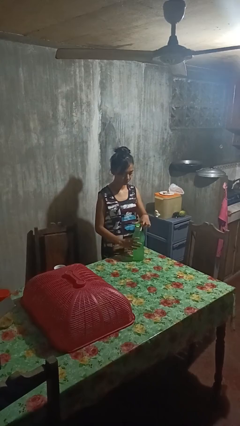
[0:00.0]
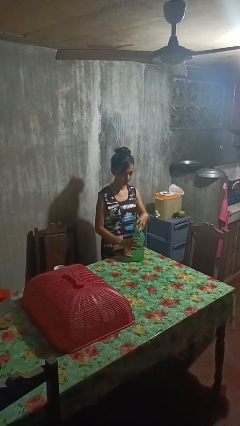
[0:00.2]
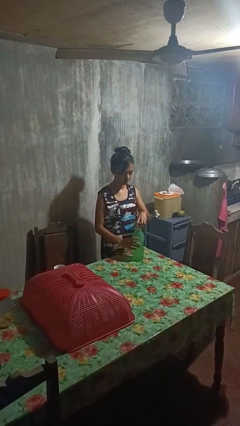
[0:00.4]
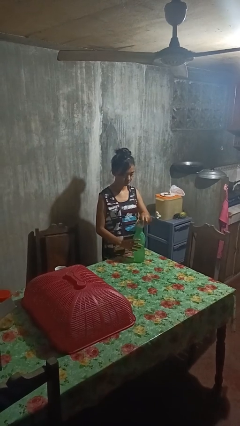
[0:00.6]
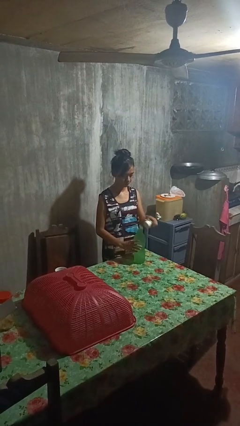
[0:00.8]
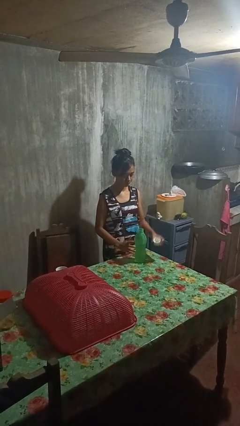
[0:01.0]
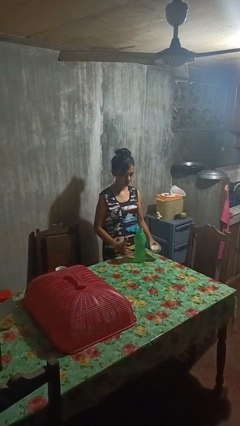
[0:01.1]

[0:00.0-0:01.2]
person unscrews lid from bottle

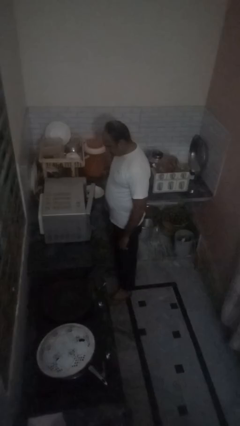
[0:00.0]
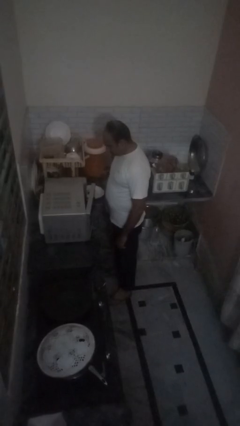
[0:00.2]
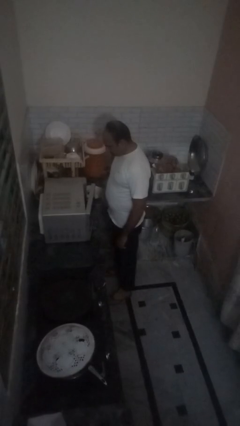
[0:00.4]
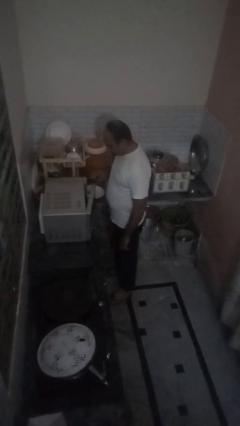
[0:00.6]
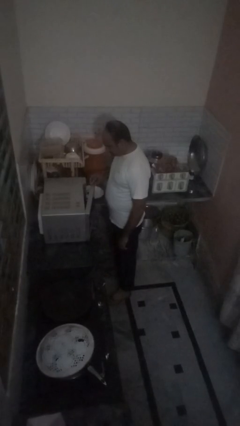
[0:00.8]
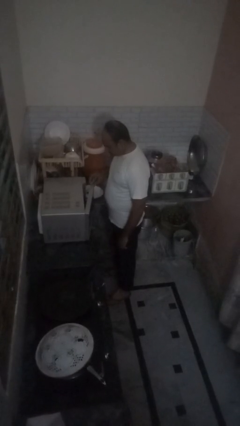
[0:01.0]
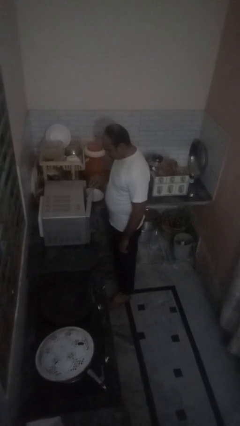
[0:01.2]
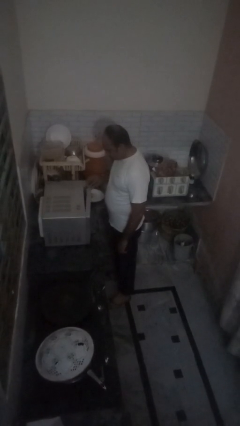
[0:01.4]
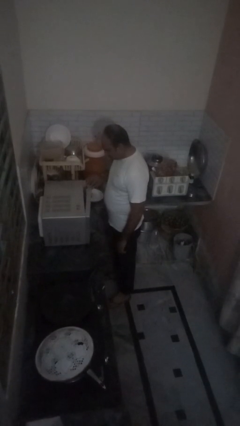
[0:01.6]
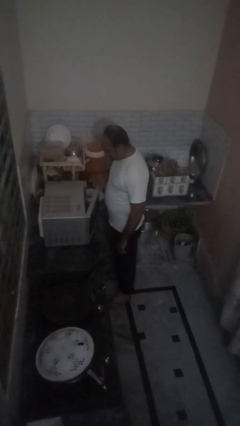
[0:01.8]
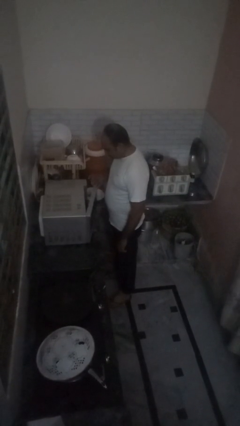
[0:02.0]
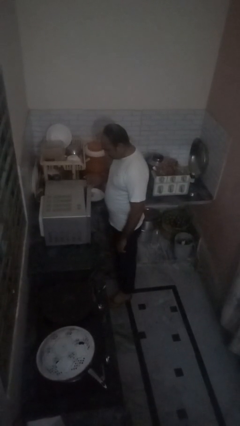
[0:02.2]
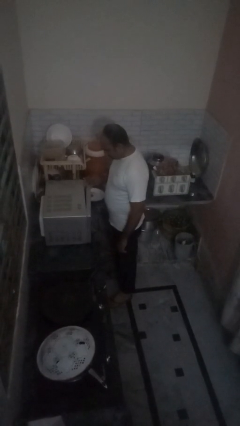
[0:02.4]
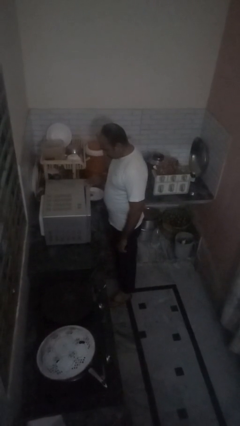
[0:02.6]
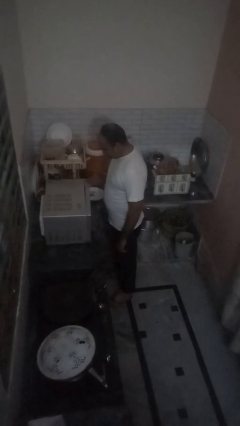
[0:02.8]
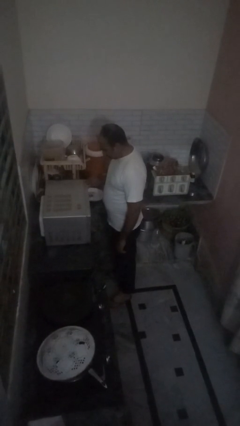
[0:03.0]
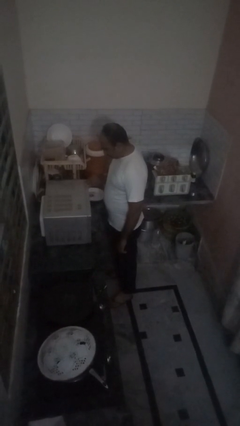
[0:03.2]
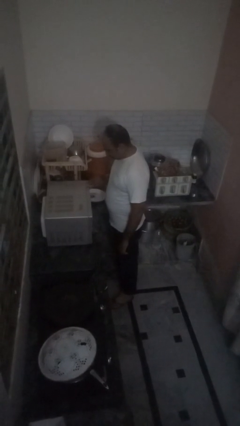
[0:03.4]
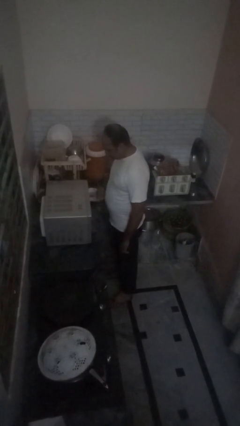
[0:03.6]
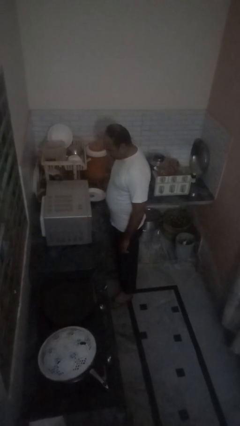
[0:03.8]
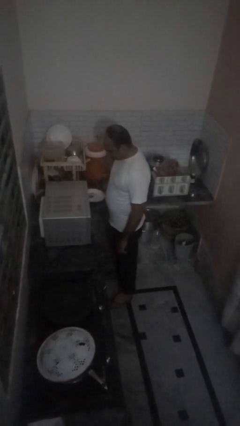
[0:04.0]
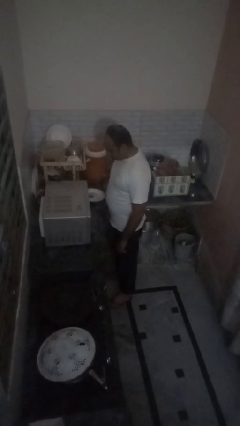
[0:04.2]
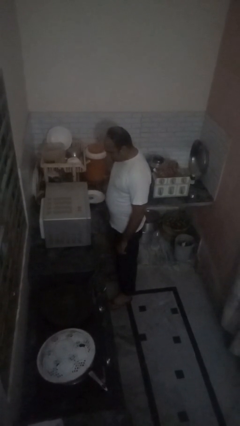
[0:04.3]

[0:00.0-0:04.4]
person closes oven door

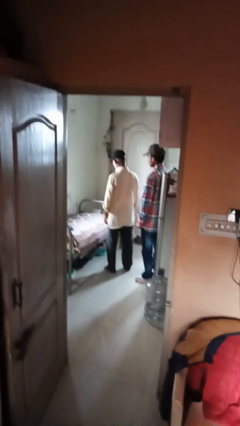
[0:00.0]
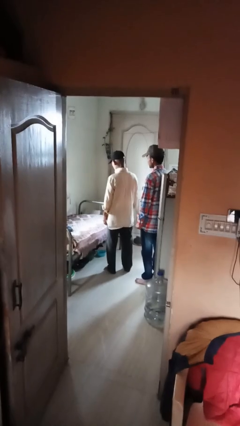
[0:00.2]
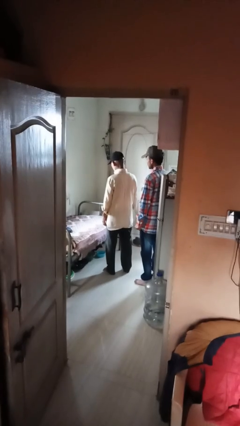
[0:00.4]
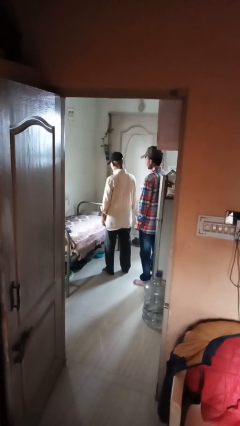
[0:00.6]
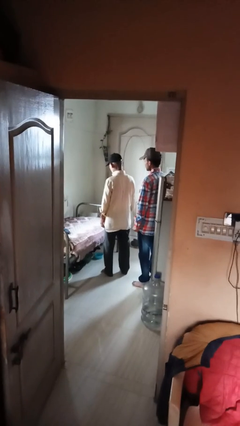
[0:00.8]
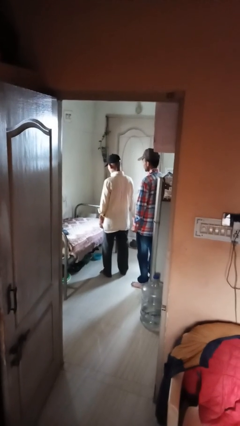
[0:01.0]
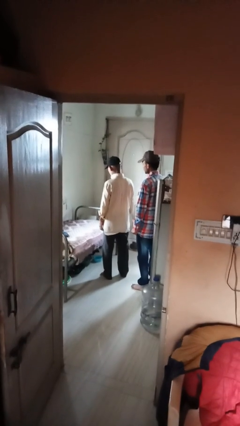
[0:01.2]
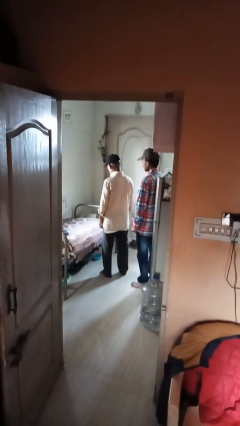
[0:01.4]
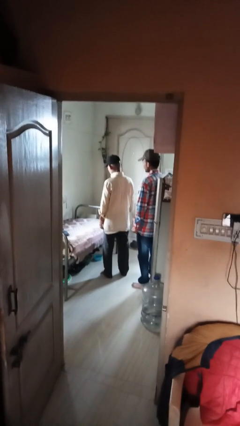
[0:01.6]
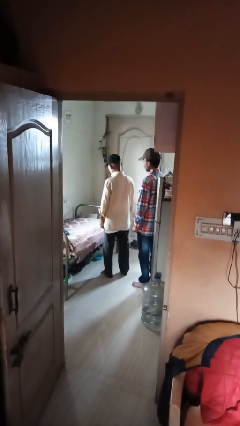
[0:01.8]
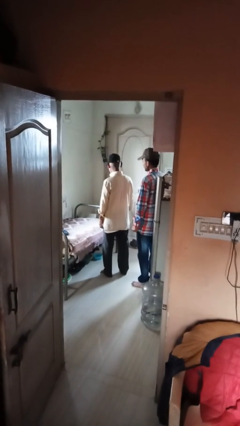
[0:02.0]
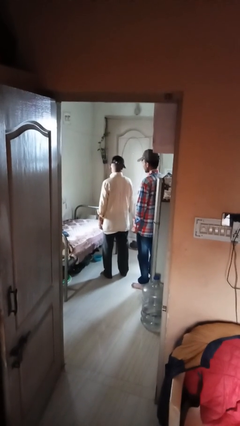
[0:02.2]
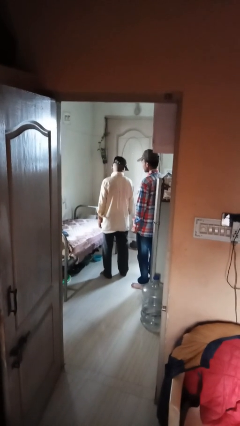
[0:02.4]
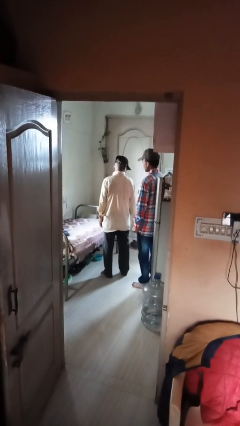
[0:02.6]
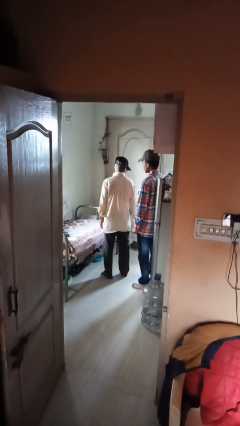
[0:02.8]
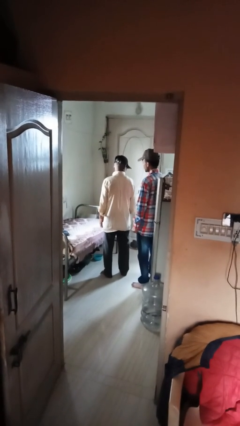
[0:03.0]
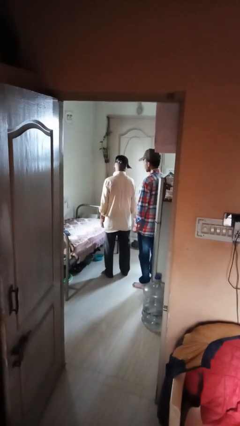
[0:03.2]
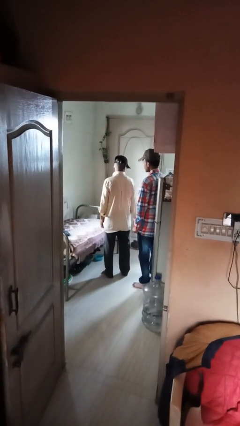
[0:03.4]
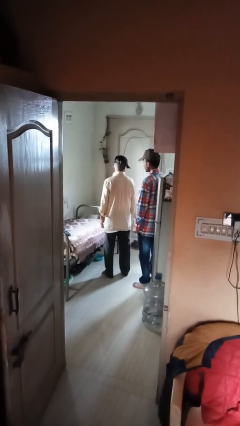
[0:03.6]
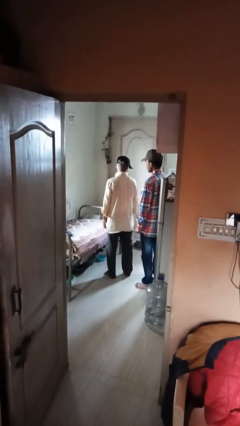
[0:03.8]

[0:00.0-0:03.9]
person looks over shoulder

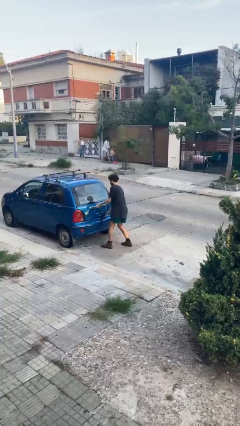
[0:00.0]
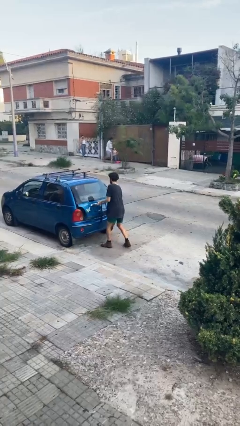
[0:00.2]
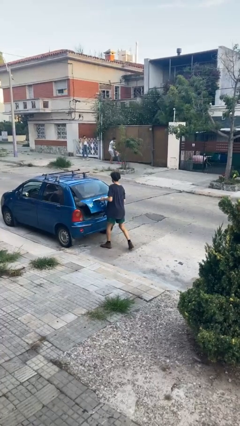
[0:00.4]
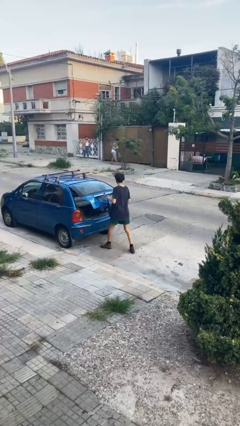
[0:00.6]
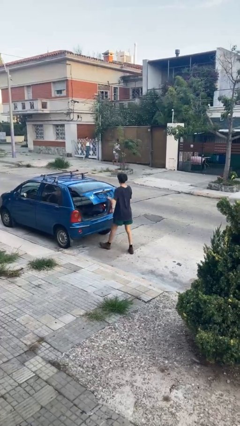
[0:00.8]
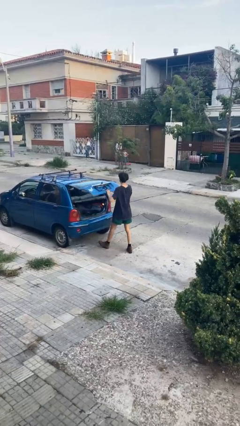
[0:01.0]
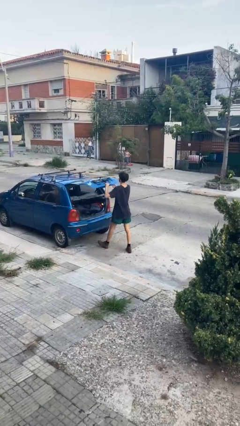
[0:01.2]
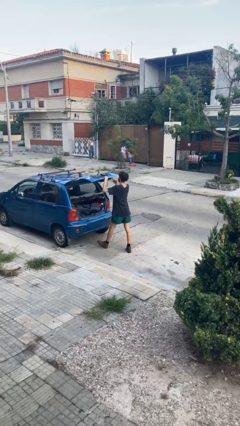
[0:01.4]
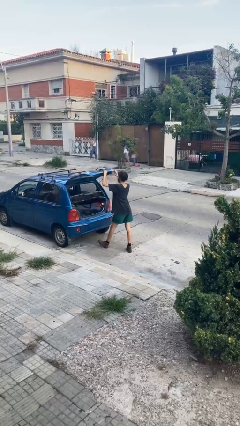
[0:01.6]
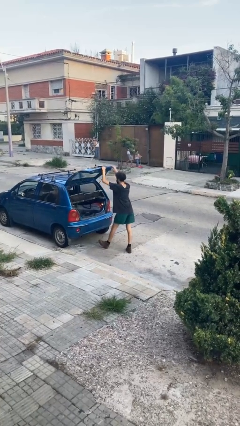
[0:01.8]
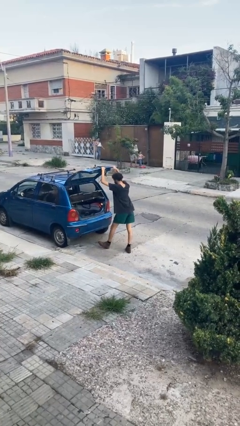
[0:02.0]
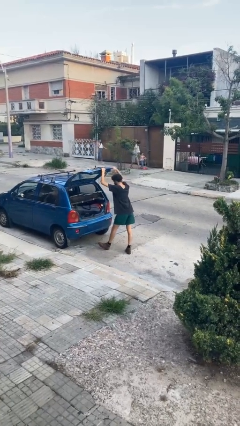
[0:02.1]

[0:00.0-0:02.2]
person opens car trunk

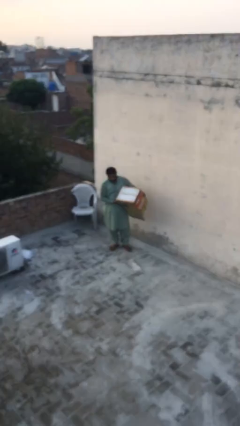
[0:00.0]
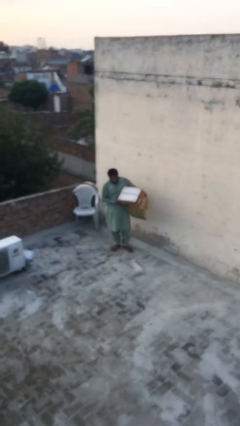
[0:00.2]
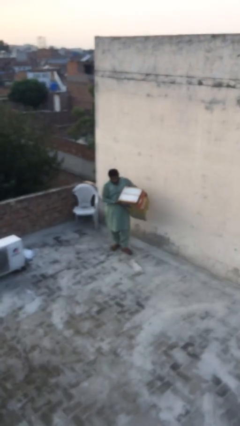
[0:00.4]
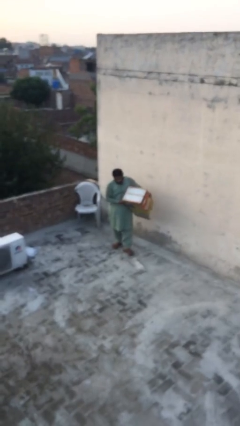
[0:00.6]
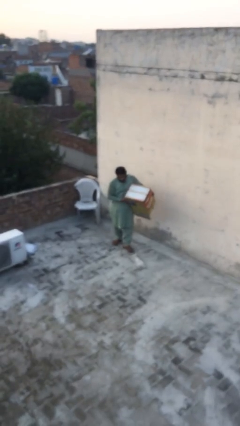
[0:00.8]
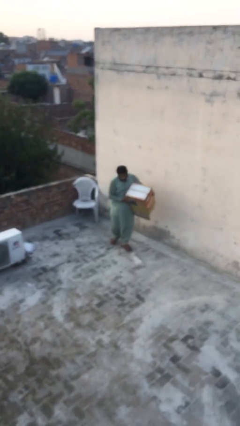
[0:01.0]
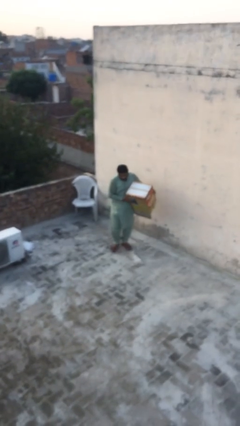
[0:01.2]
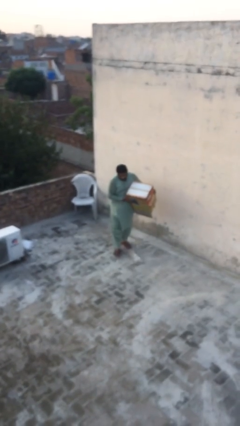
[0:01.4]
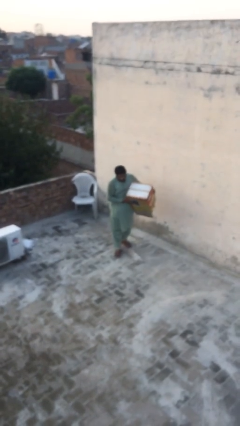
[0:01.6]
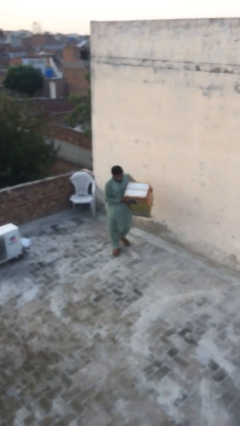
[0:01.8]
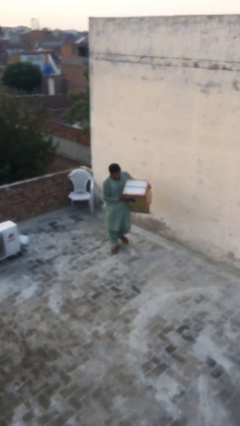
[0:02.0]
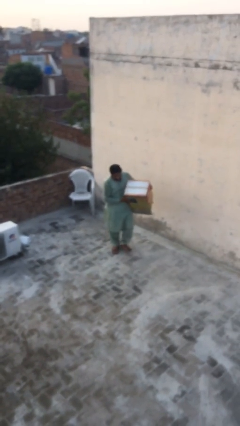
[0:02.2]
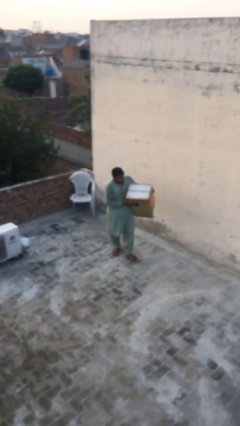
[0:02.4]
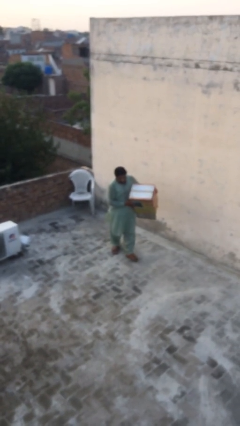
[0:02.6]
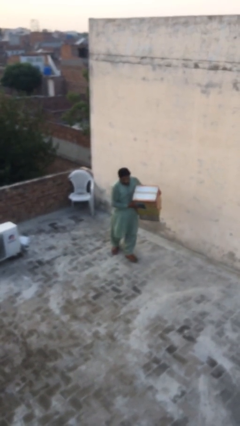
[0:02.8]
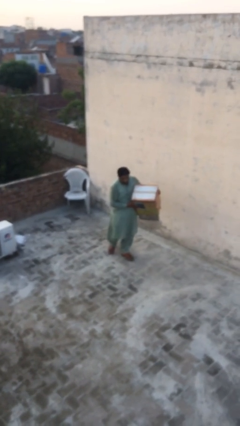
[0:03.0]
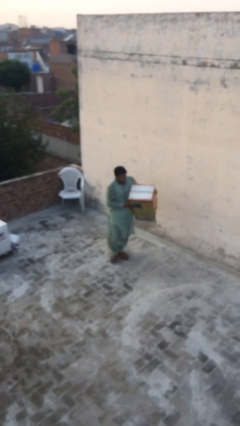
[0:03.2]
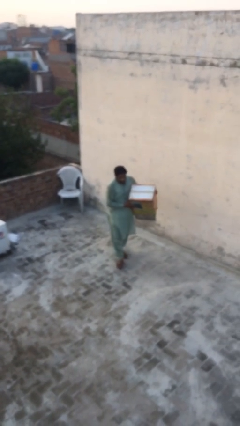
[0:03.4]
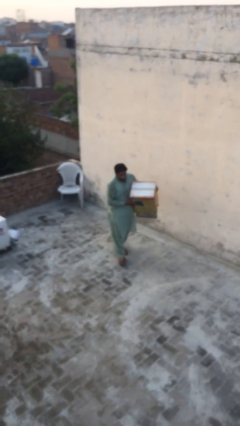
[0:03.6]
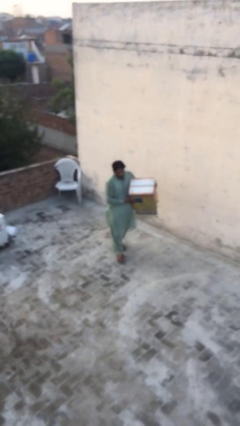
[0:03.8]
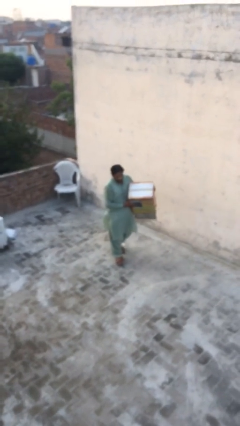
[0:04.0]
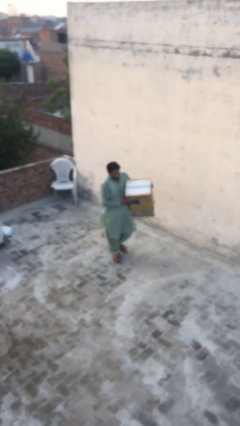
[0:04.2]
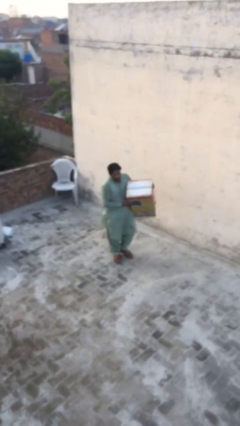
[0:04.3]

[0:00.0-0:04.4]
person carries heavy object

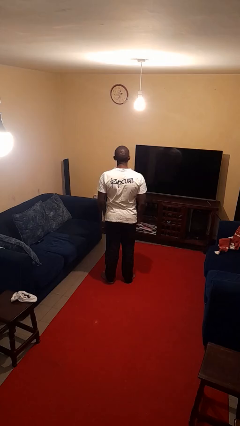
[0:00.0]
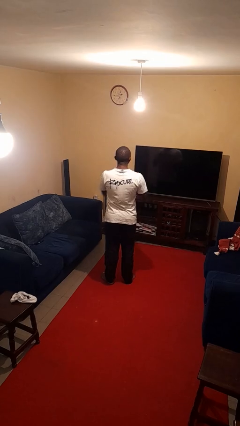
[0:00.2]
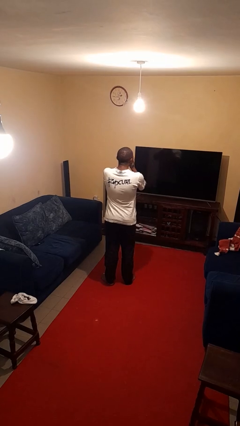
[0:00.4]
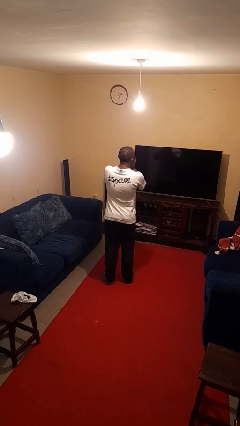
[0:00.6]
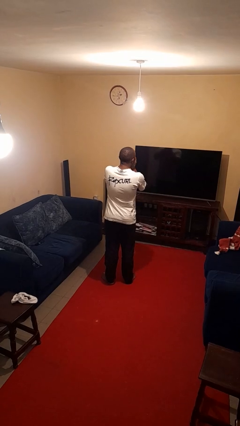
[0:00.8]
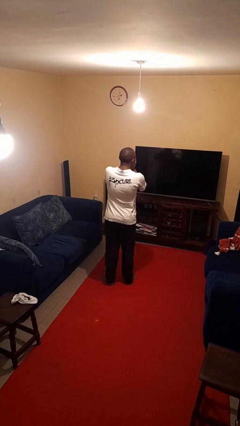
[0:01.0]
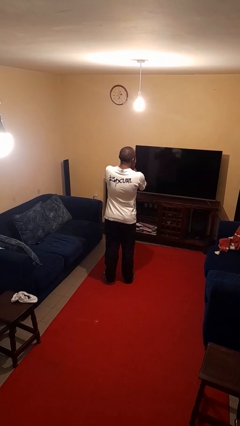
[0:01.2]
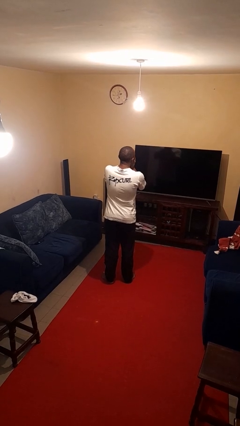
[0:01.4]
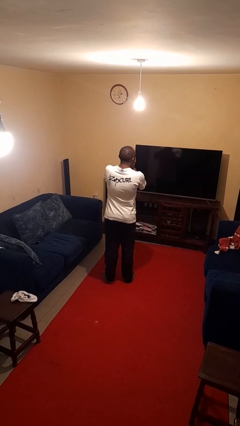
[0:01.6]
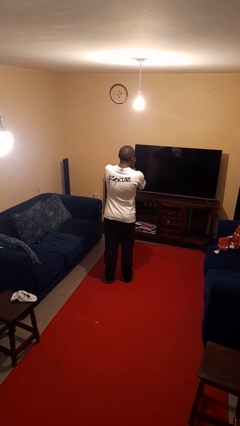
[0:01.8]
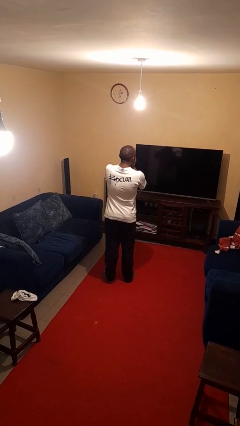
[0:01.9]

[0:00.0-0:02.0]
person sneezes into hand
